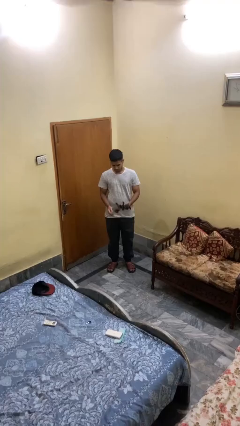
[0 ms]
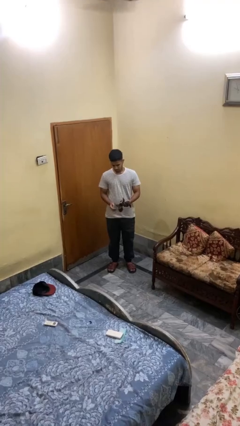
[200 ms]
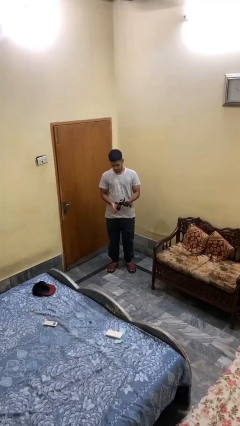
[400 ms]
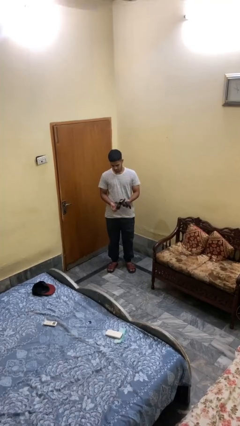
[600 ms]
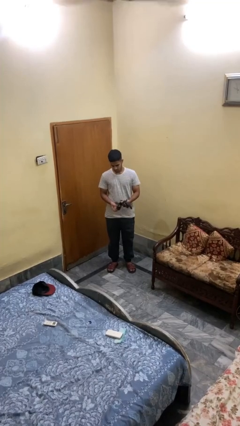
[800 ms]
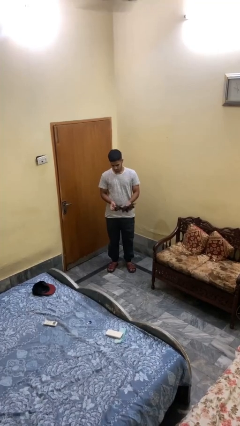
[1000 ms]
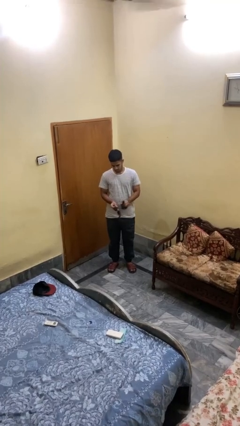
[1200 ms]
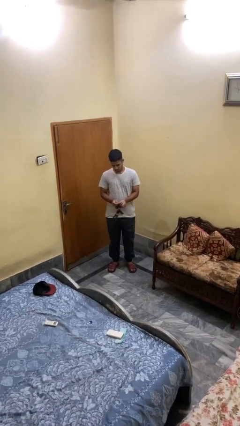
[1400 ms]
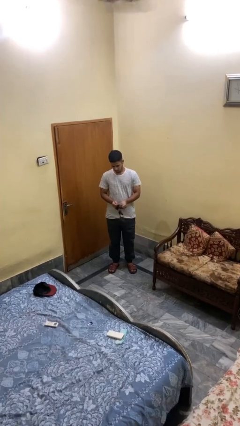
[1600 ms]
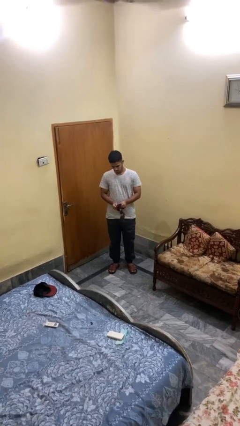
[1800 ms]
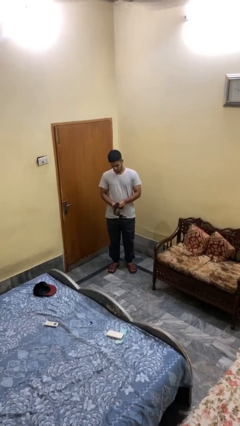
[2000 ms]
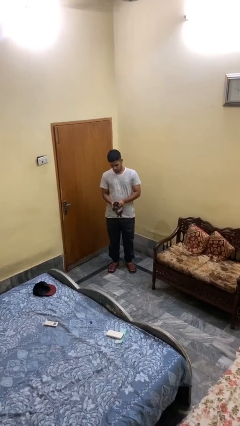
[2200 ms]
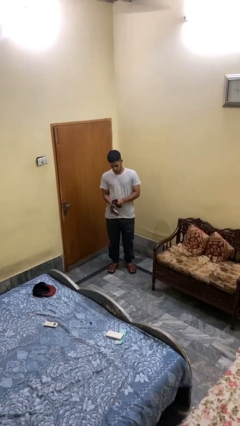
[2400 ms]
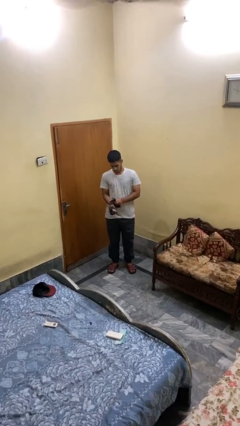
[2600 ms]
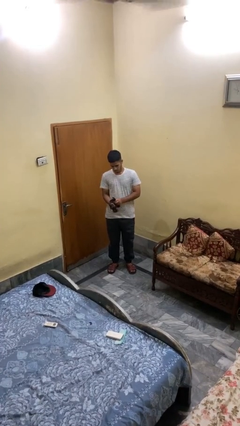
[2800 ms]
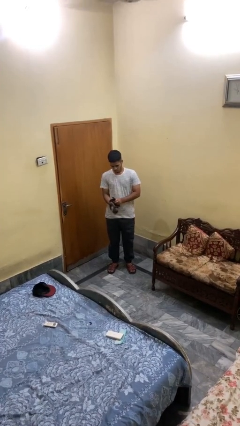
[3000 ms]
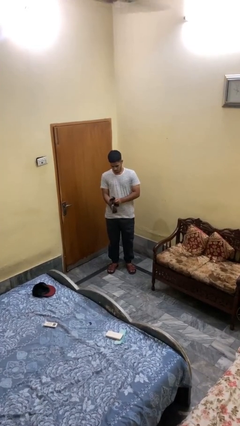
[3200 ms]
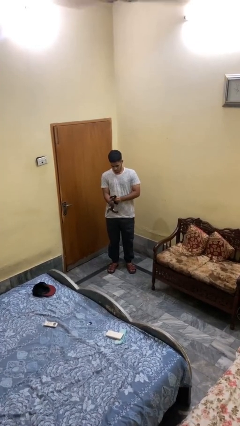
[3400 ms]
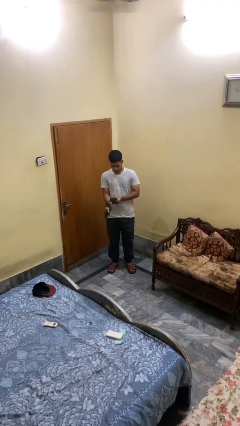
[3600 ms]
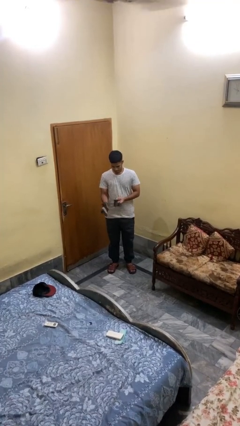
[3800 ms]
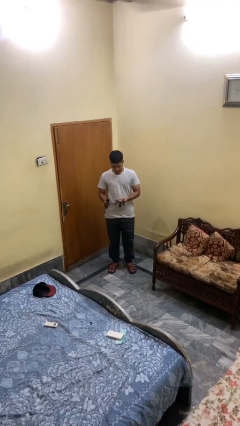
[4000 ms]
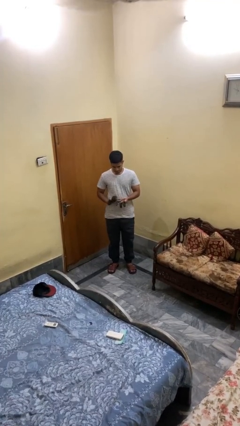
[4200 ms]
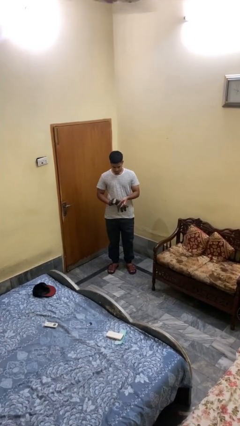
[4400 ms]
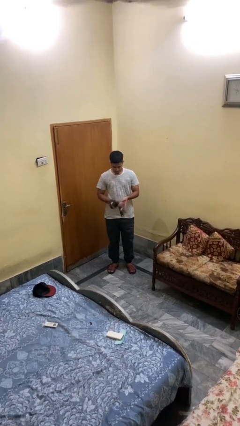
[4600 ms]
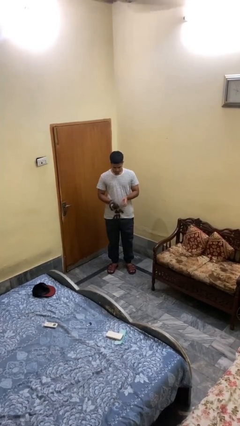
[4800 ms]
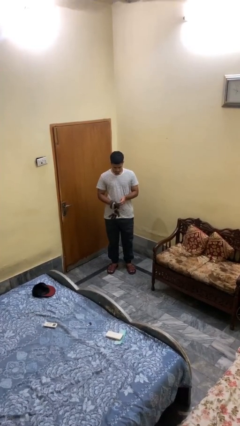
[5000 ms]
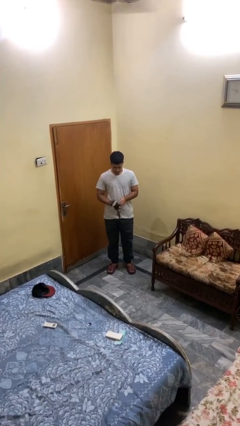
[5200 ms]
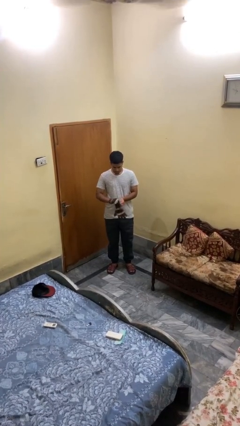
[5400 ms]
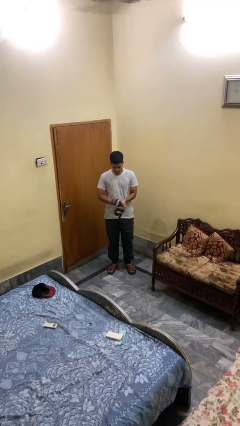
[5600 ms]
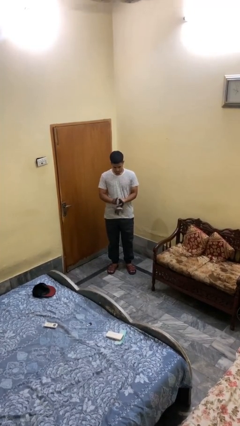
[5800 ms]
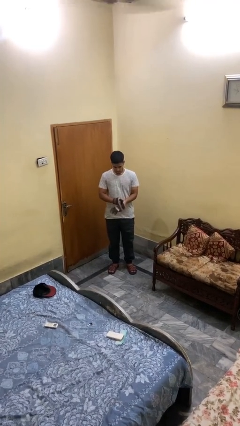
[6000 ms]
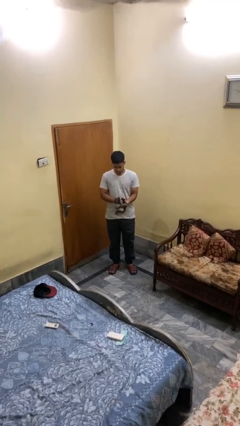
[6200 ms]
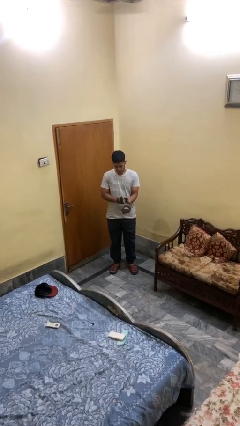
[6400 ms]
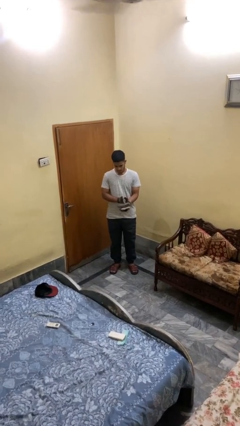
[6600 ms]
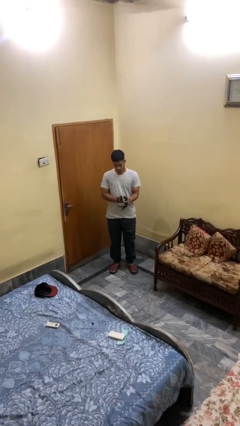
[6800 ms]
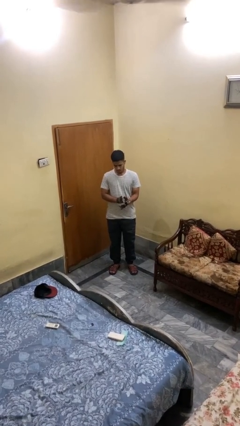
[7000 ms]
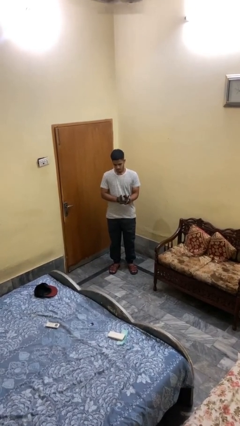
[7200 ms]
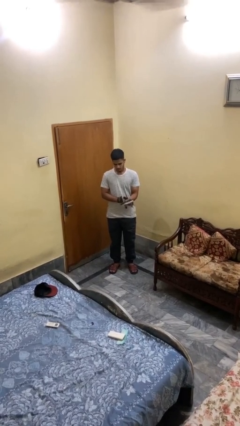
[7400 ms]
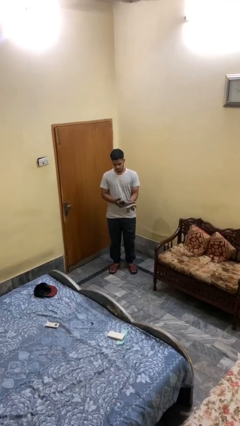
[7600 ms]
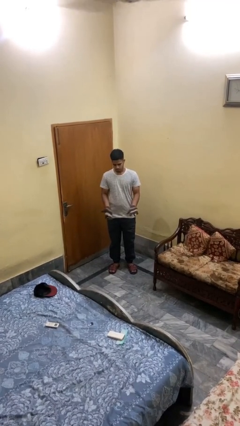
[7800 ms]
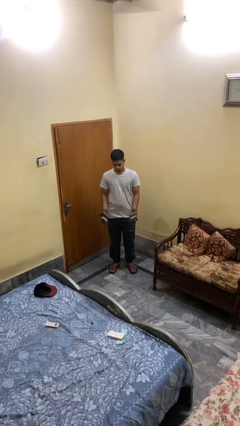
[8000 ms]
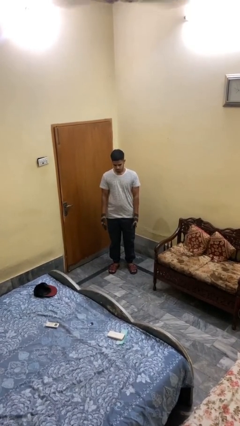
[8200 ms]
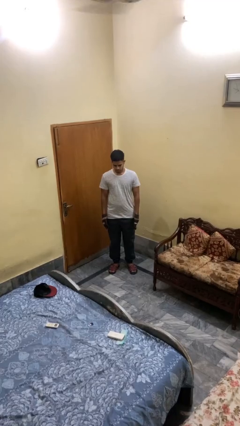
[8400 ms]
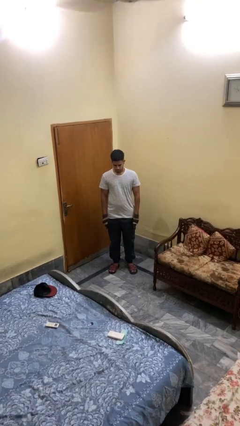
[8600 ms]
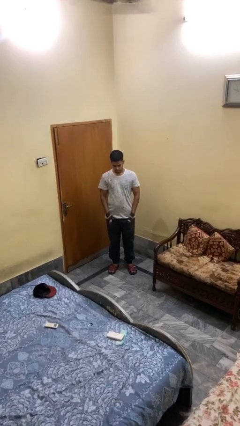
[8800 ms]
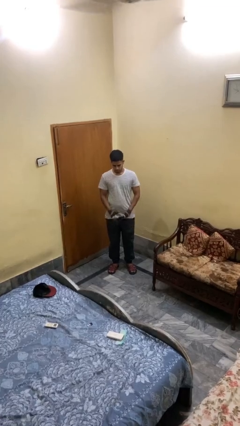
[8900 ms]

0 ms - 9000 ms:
person puts on gloves

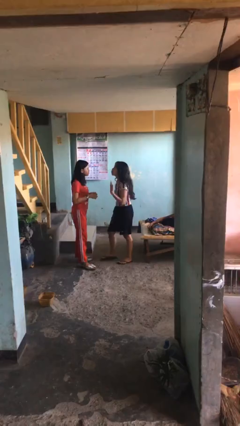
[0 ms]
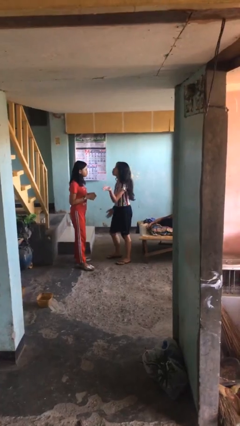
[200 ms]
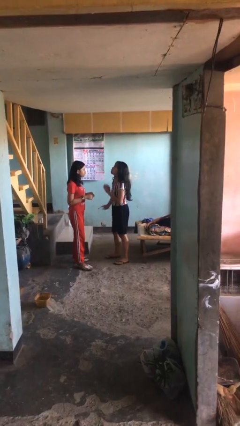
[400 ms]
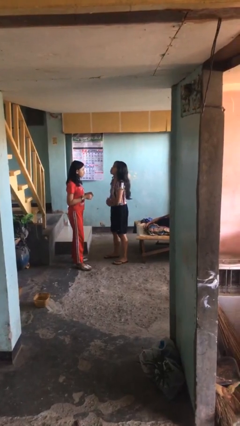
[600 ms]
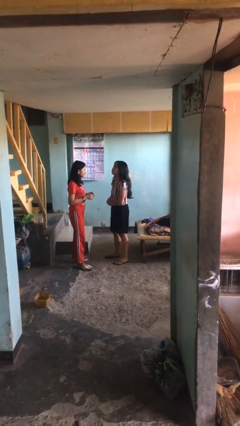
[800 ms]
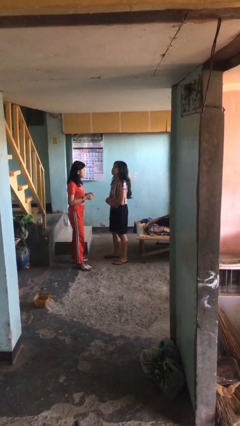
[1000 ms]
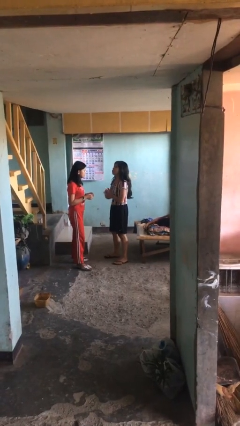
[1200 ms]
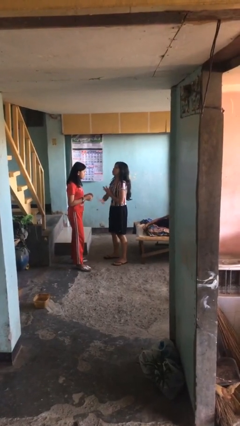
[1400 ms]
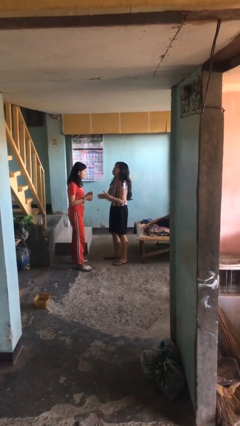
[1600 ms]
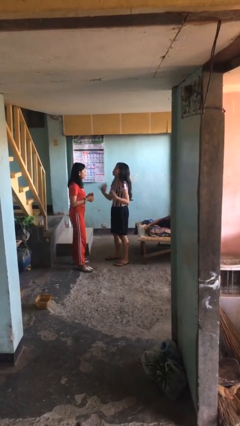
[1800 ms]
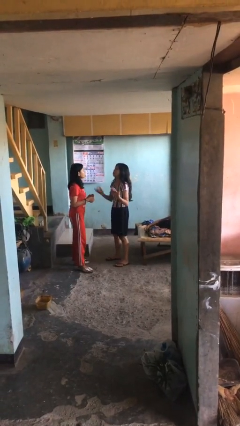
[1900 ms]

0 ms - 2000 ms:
person talks to person

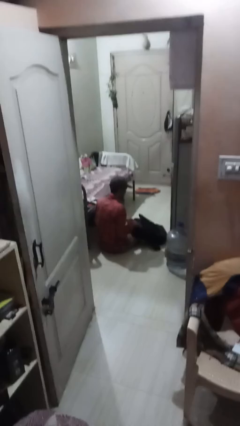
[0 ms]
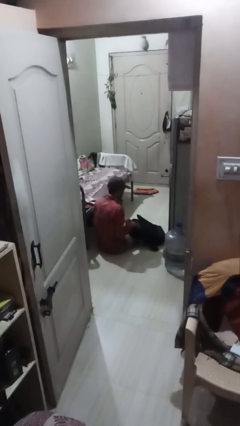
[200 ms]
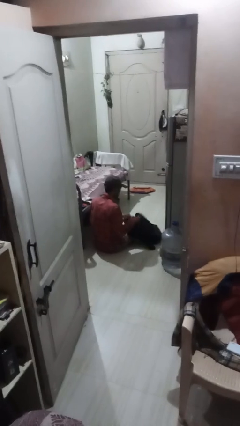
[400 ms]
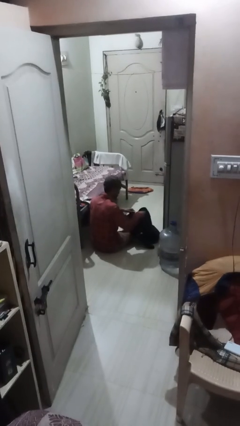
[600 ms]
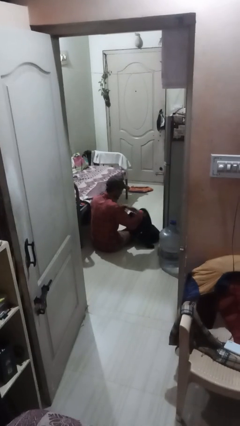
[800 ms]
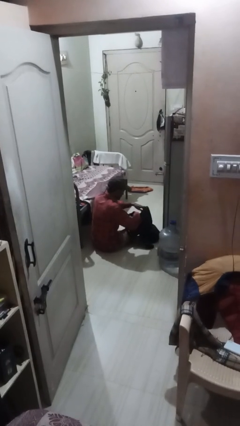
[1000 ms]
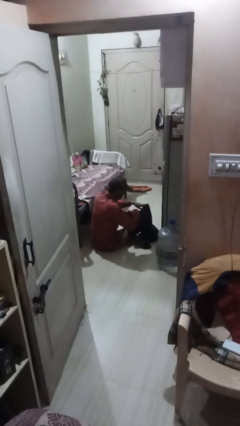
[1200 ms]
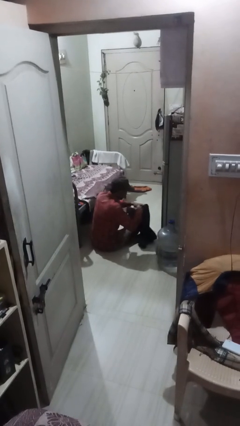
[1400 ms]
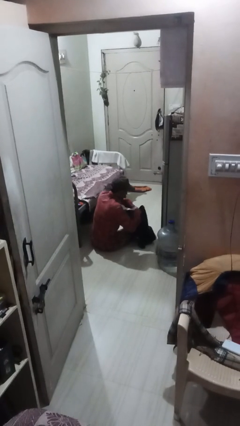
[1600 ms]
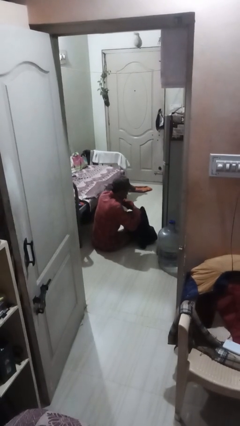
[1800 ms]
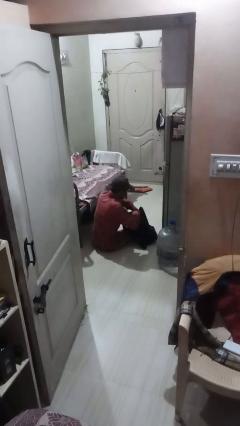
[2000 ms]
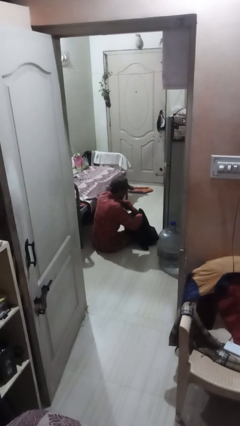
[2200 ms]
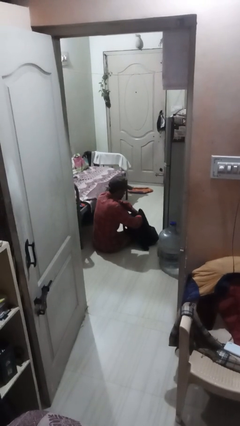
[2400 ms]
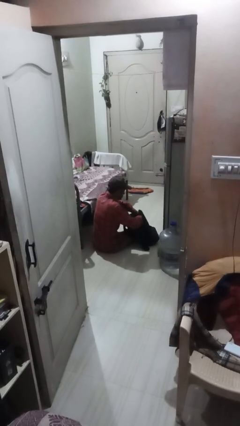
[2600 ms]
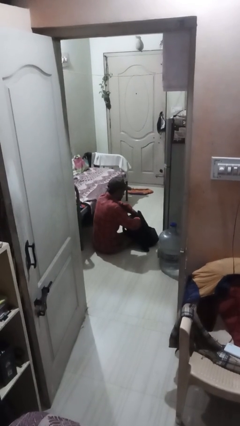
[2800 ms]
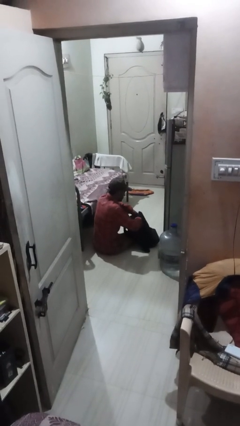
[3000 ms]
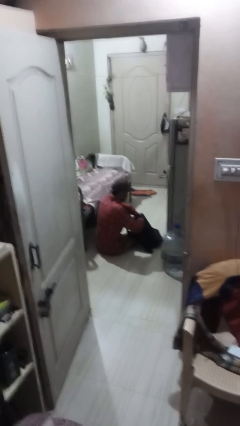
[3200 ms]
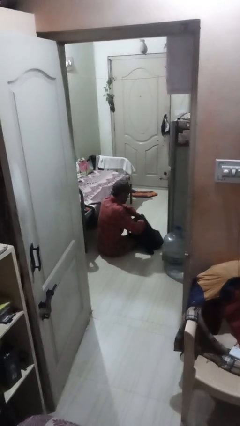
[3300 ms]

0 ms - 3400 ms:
person searches in backpack

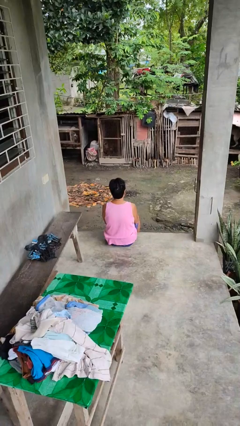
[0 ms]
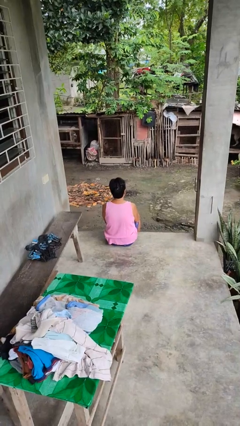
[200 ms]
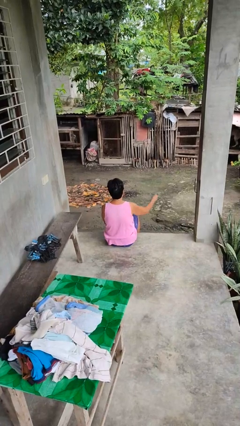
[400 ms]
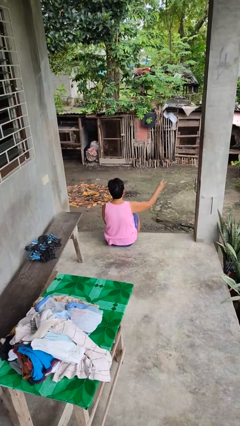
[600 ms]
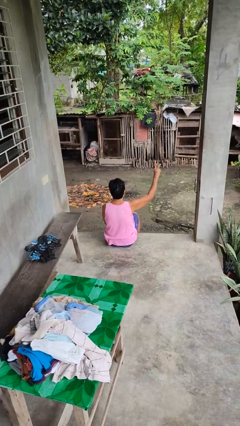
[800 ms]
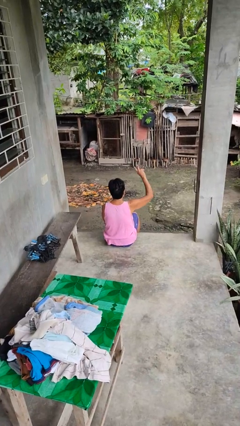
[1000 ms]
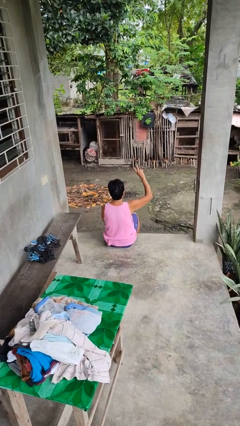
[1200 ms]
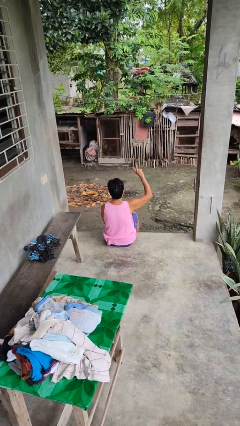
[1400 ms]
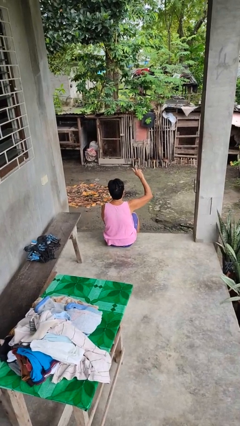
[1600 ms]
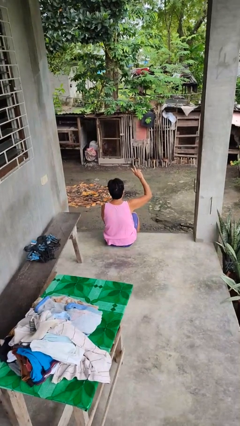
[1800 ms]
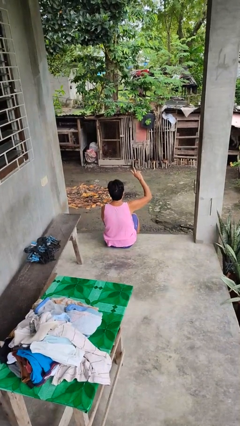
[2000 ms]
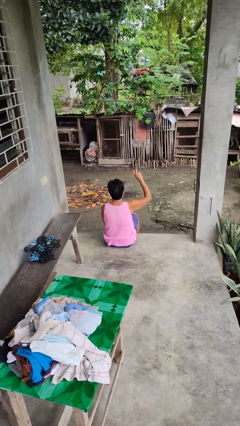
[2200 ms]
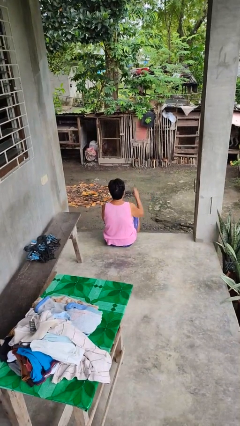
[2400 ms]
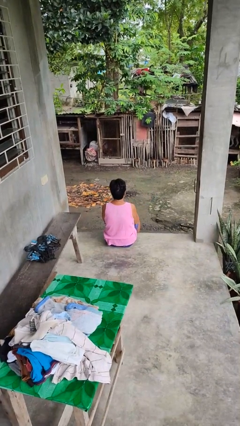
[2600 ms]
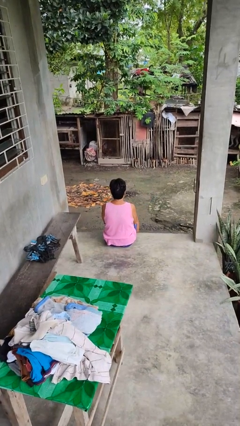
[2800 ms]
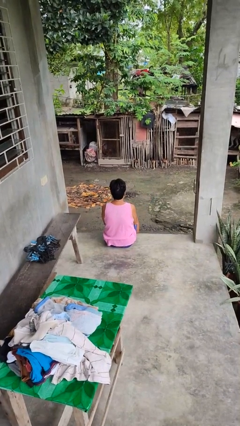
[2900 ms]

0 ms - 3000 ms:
person gestures peace

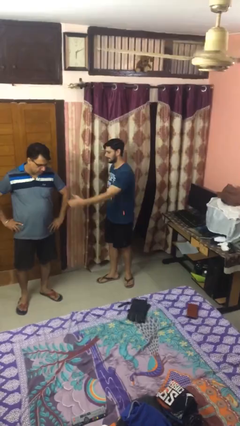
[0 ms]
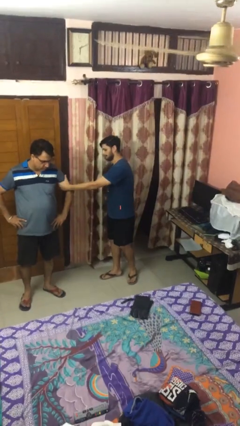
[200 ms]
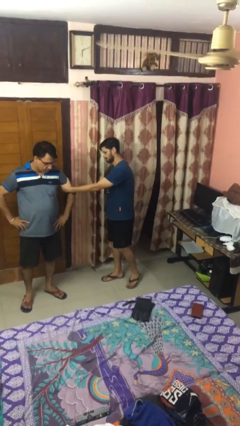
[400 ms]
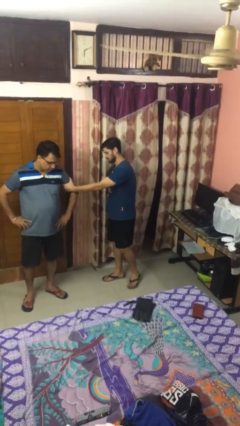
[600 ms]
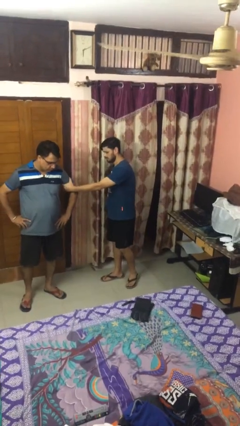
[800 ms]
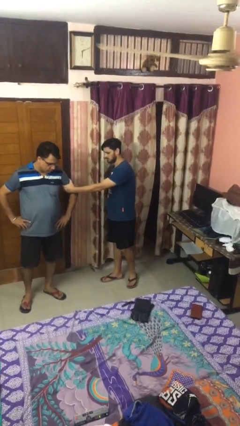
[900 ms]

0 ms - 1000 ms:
person grabs person by bicep
